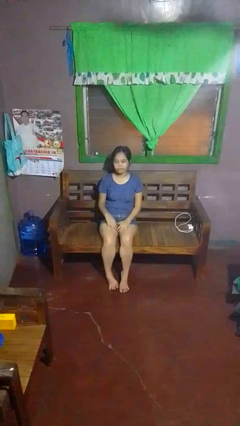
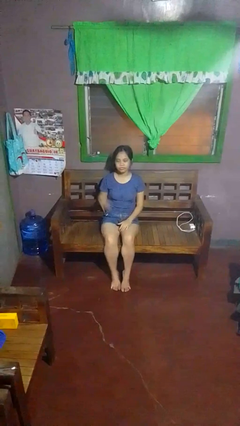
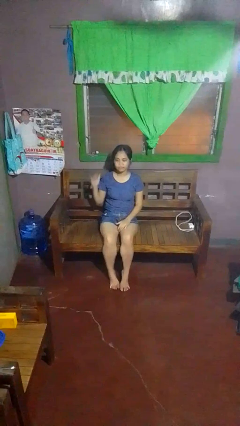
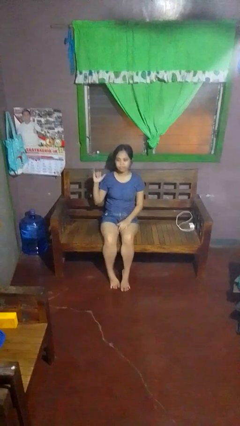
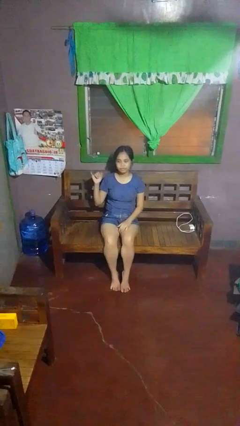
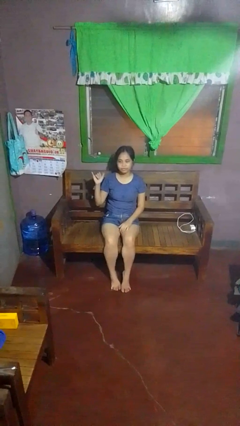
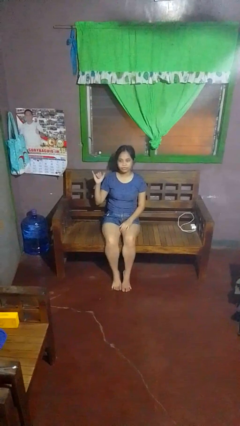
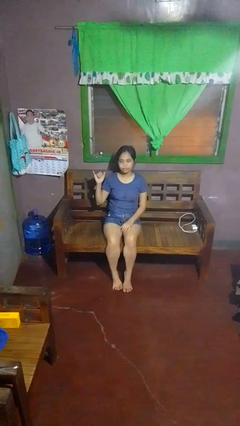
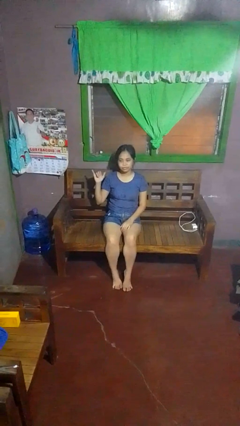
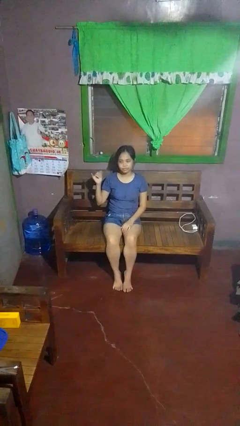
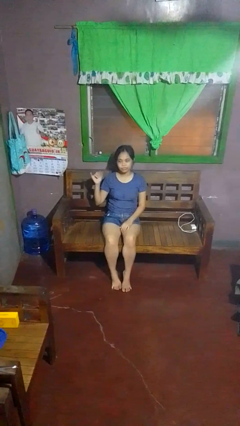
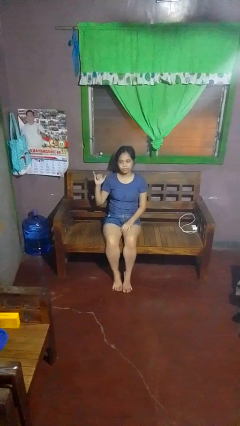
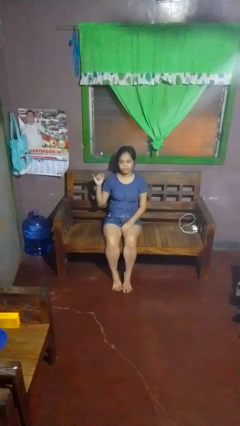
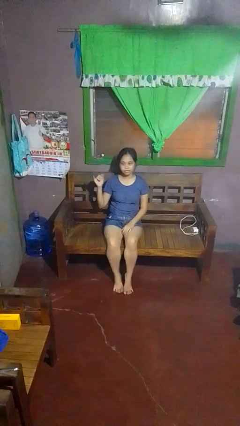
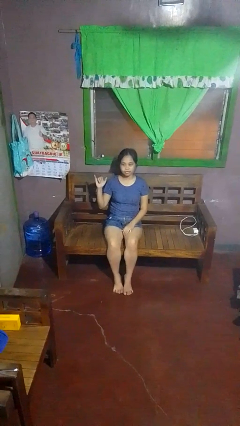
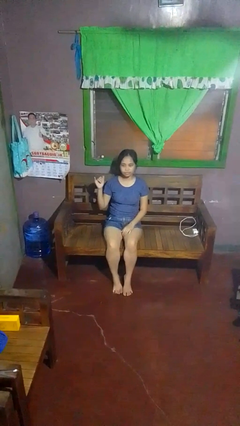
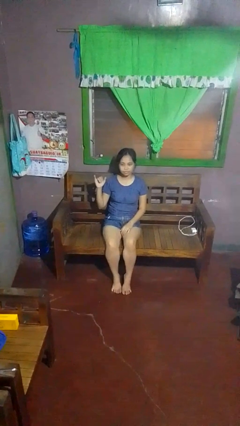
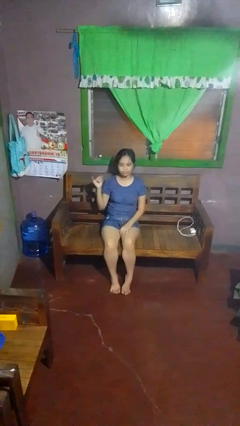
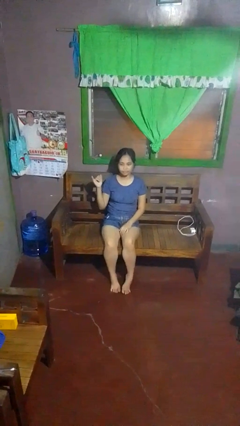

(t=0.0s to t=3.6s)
person gestures hang loose

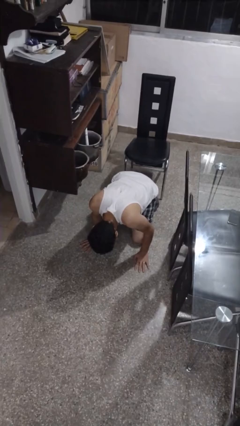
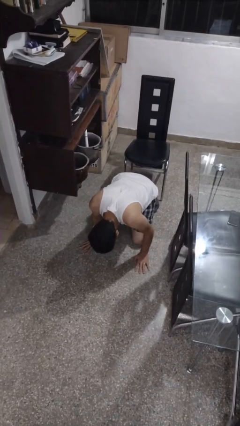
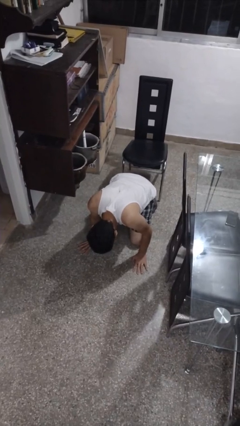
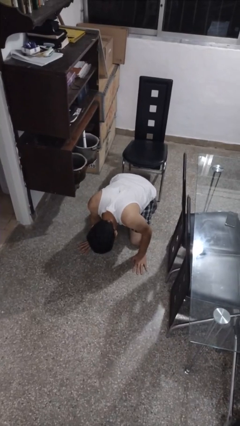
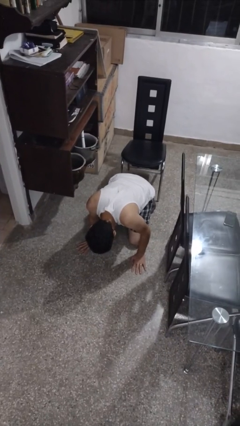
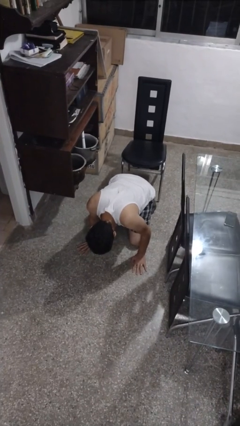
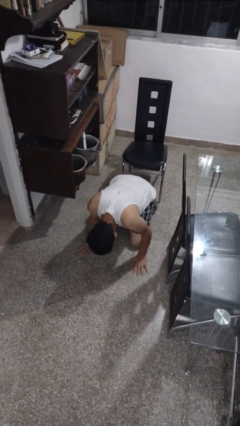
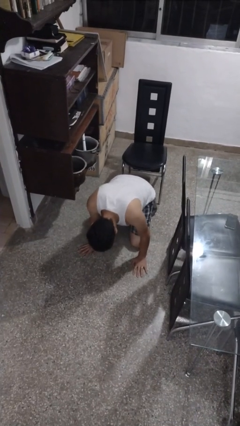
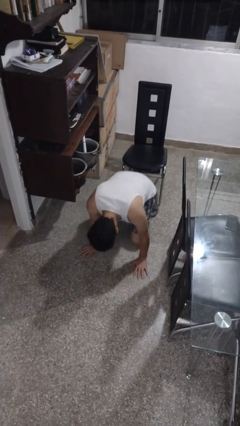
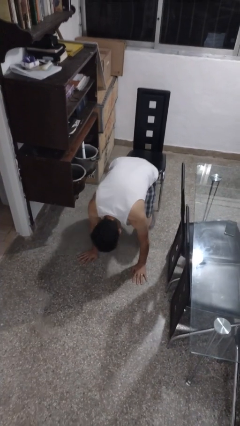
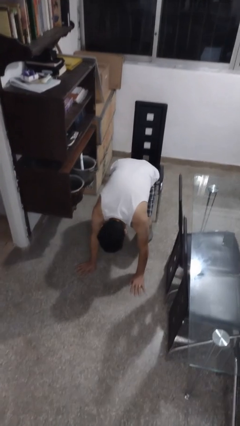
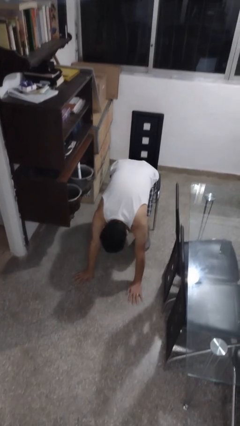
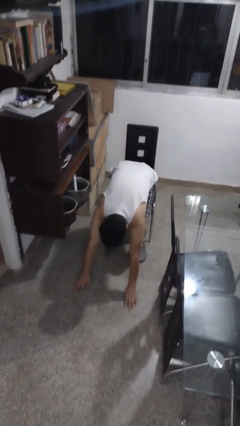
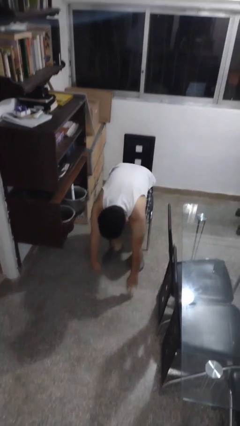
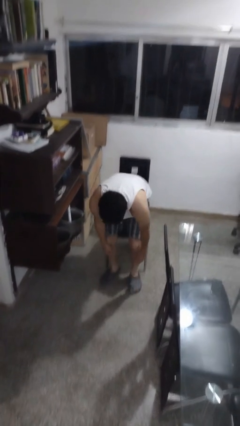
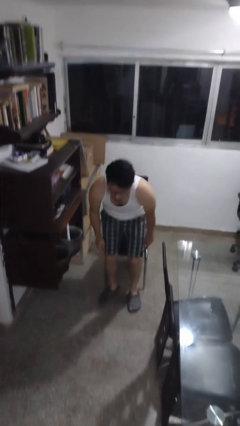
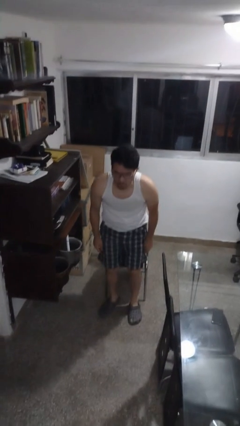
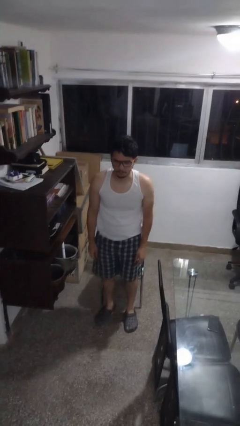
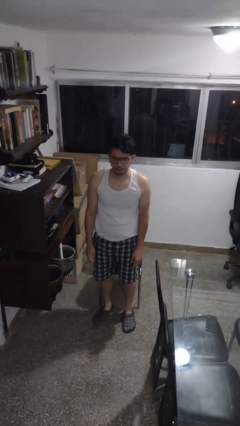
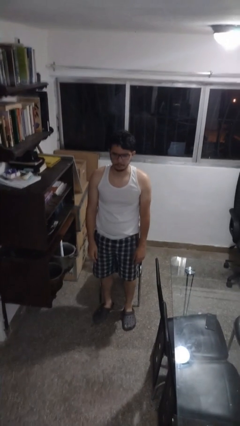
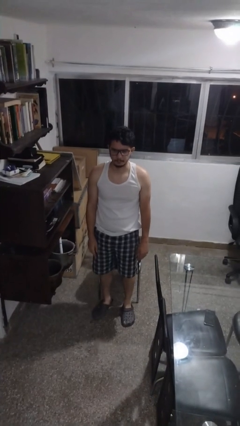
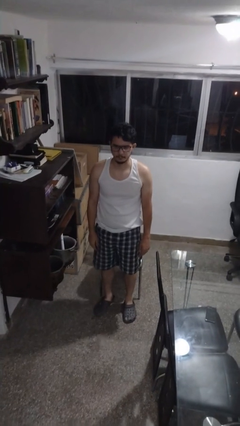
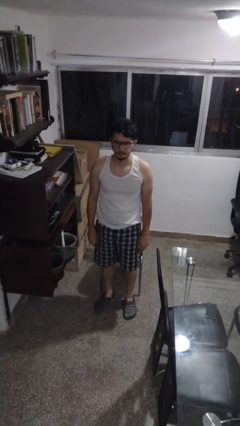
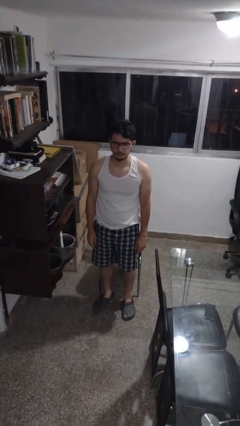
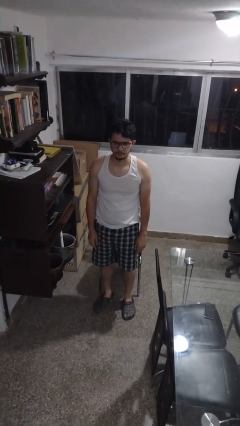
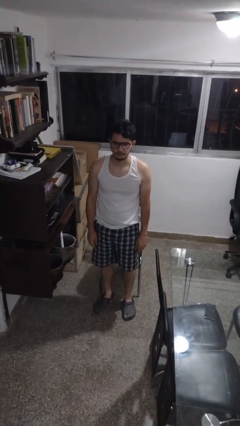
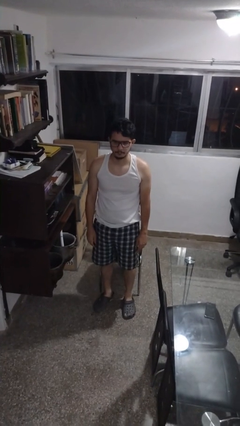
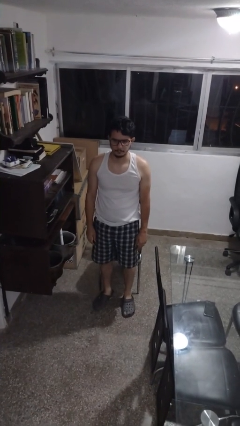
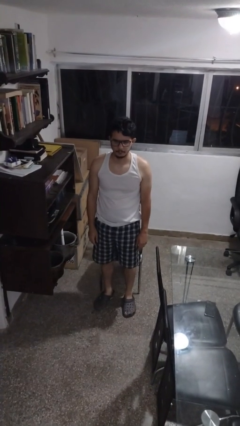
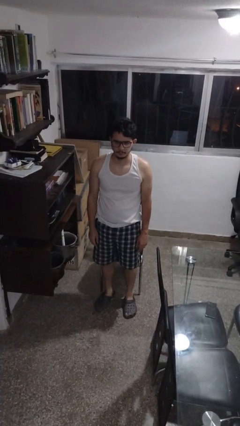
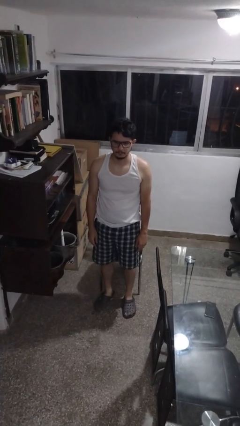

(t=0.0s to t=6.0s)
person stands up from floor

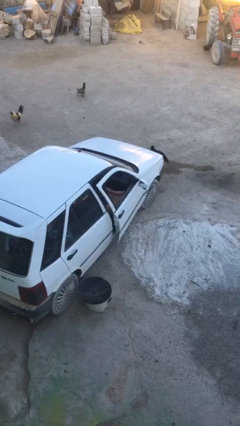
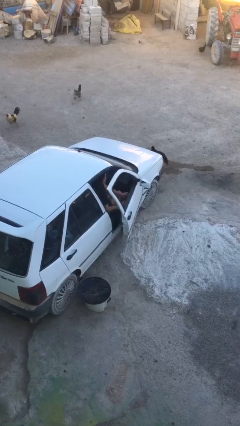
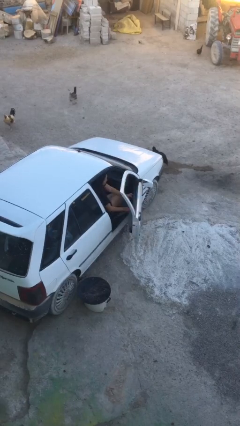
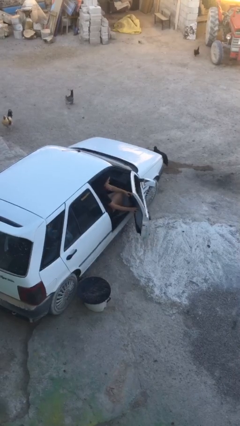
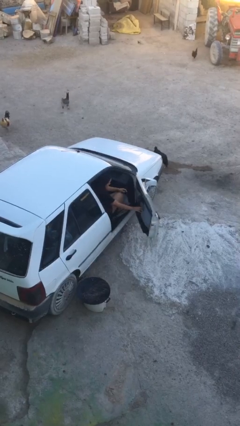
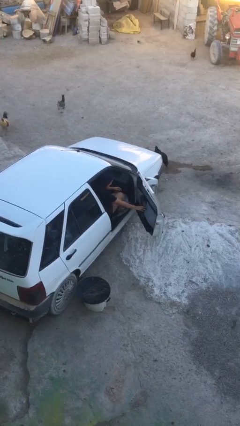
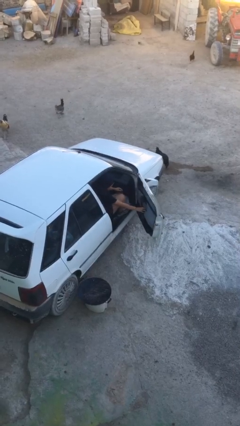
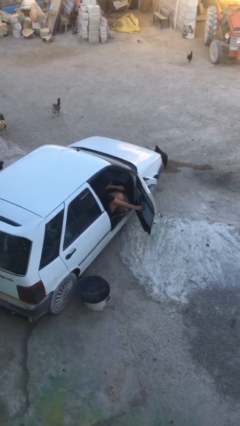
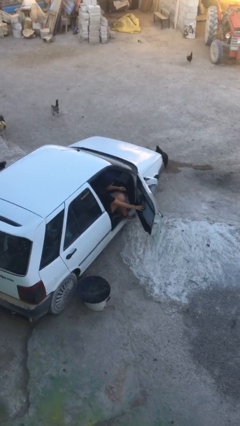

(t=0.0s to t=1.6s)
person opens car door

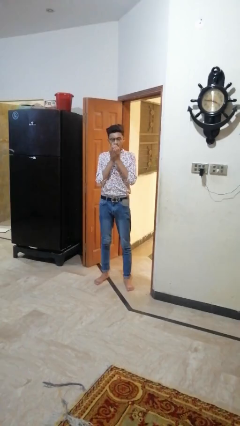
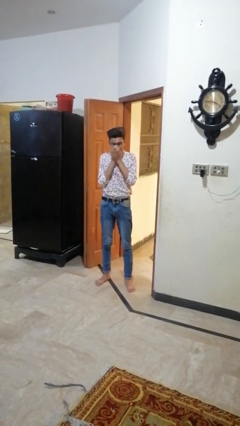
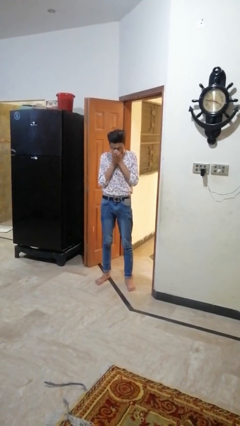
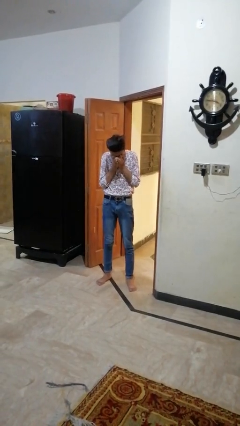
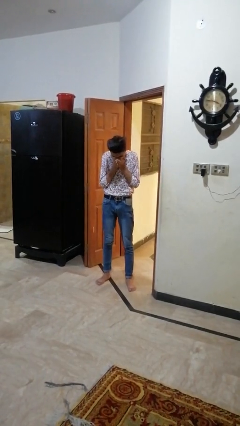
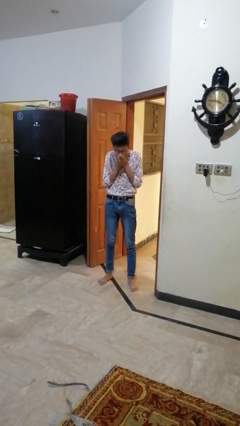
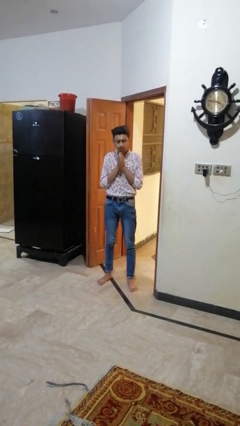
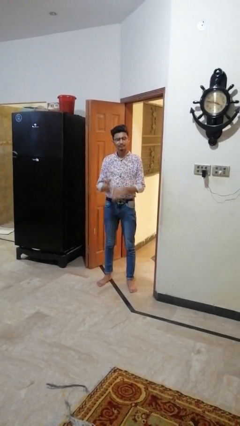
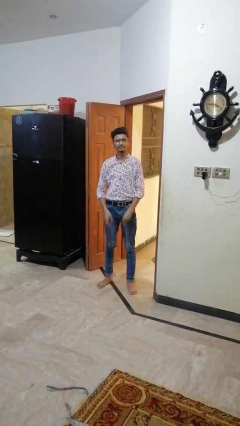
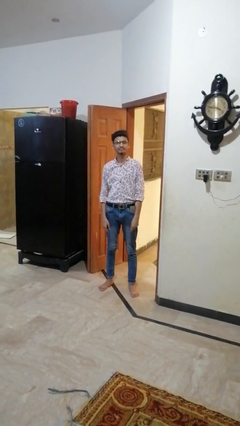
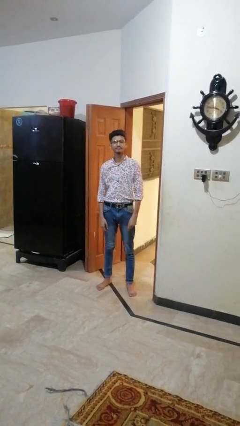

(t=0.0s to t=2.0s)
person sneezes into hand

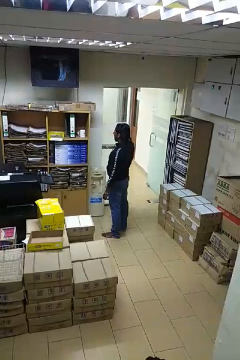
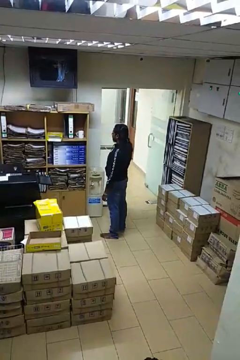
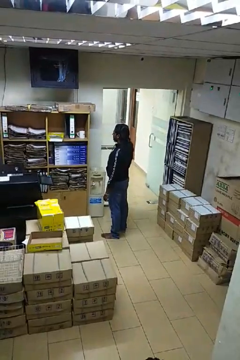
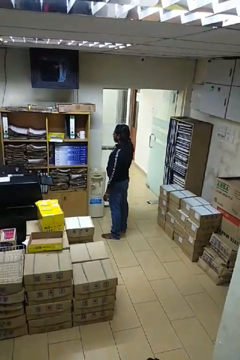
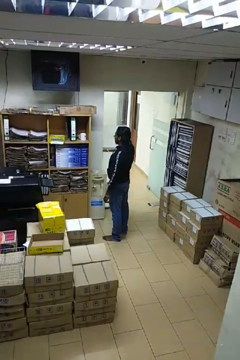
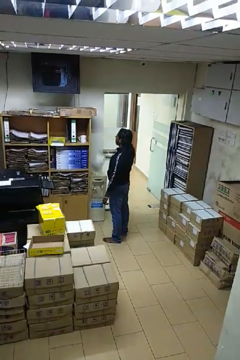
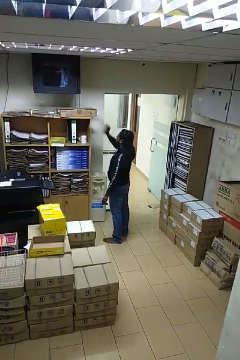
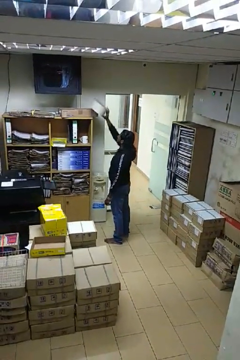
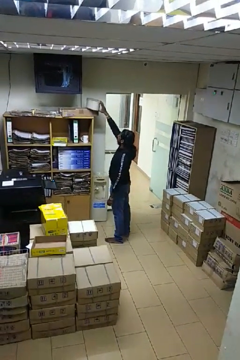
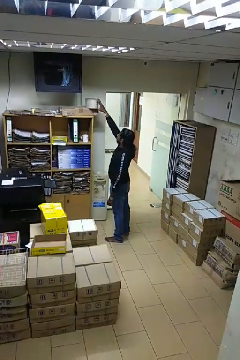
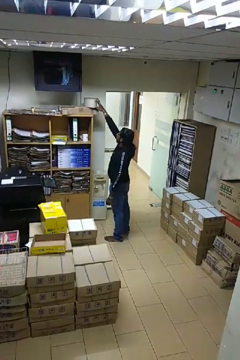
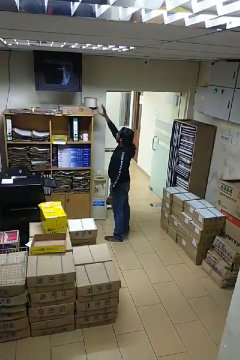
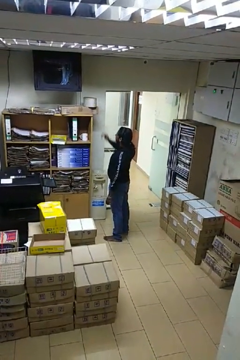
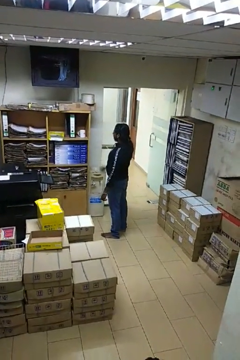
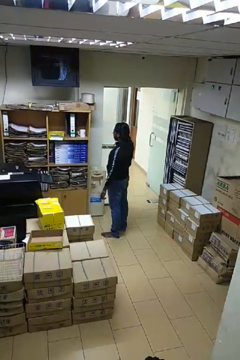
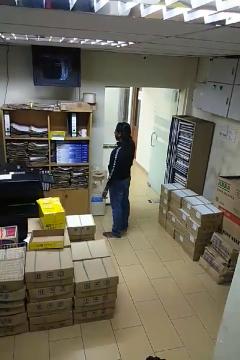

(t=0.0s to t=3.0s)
person puts down object on shelf

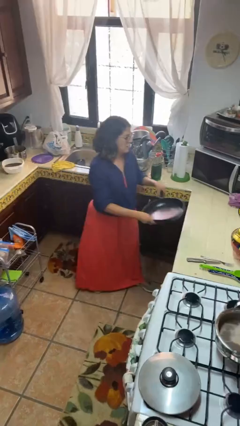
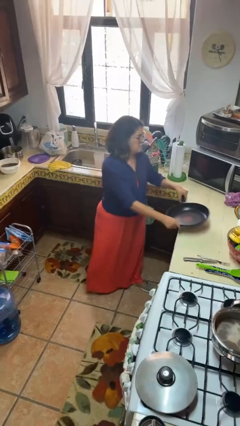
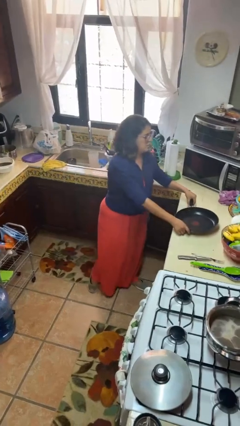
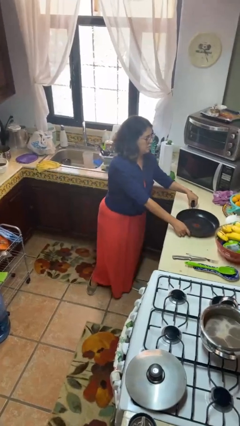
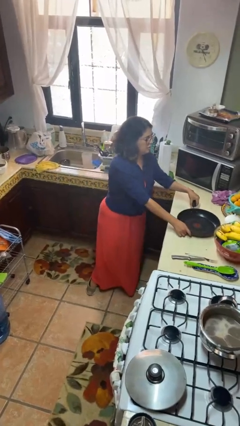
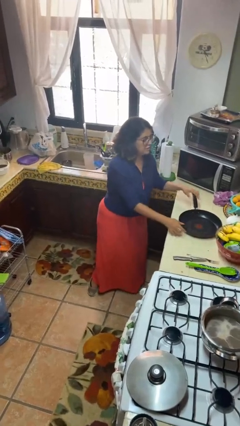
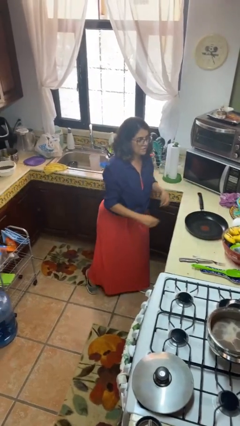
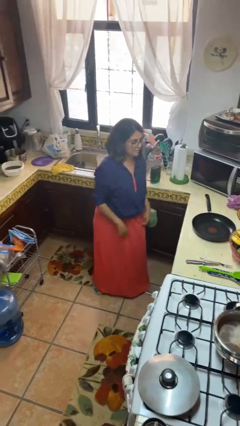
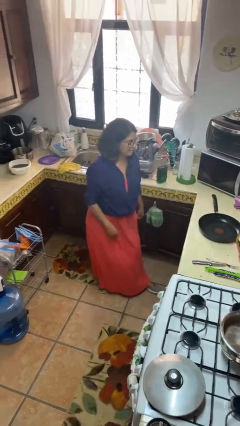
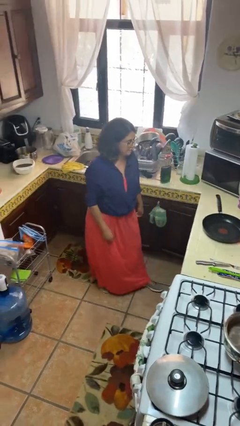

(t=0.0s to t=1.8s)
person puts down object on countertop

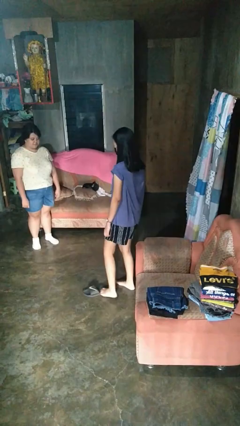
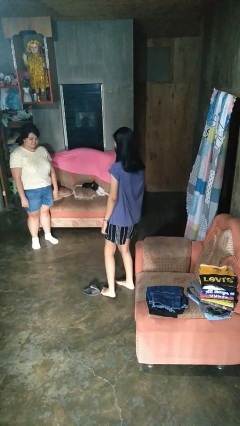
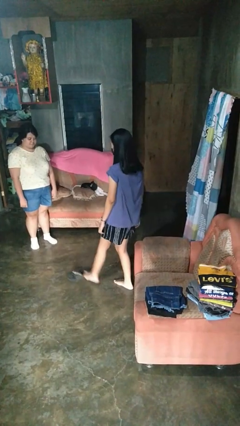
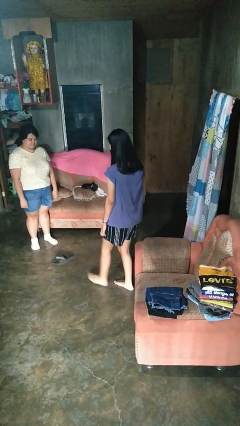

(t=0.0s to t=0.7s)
person kicks object to person
